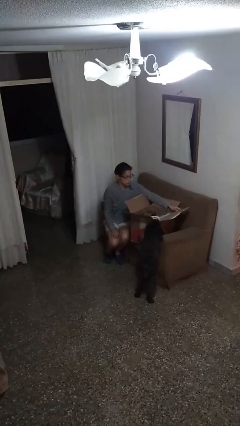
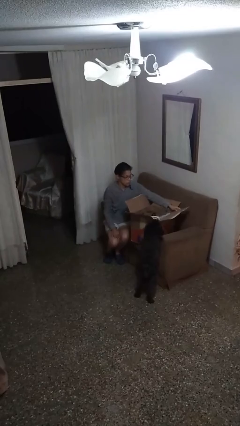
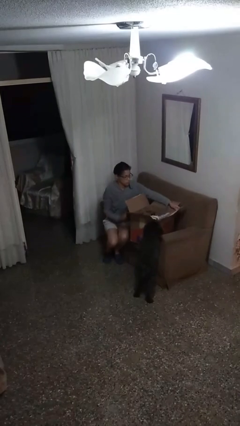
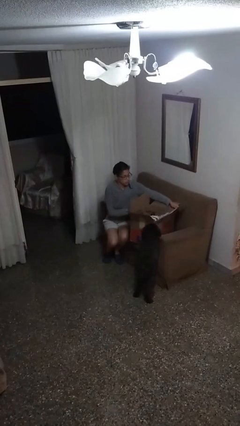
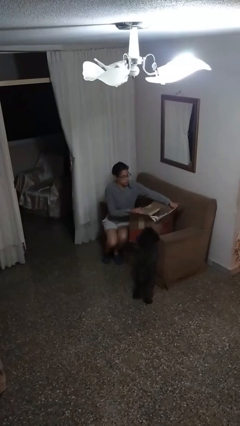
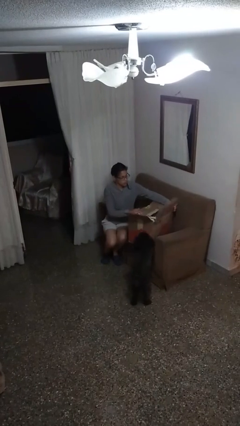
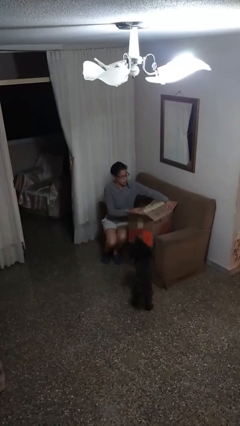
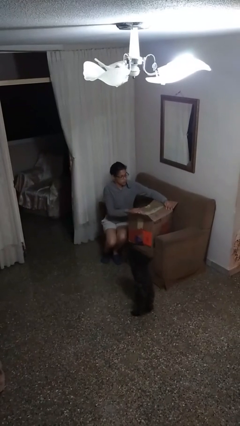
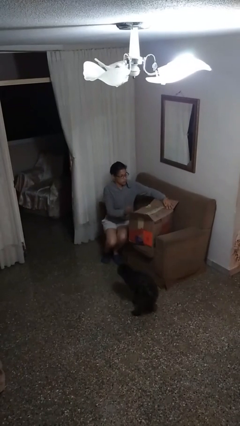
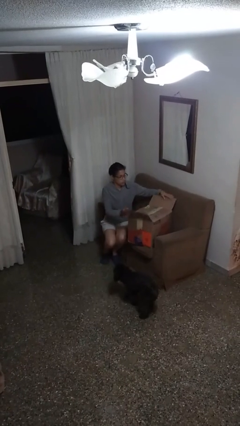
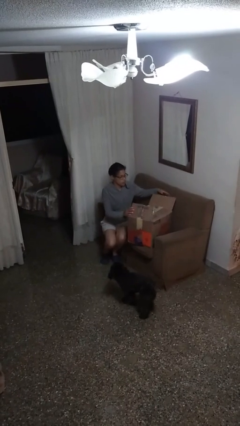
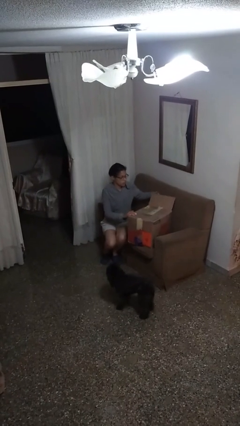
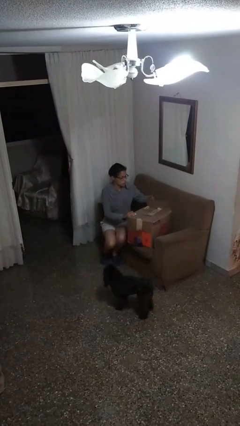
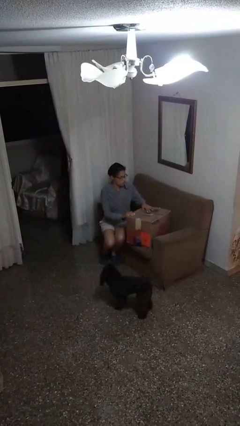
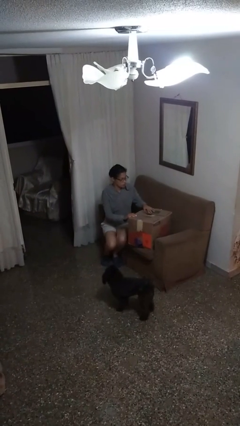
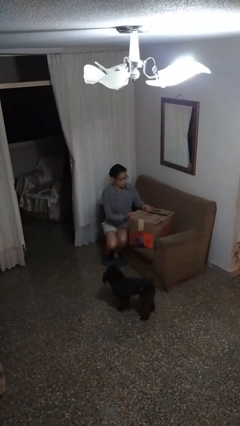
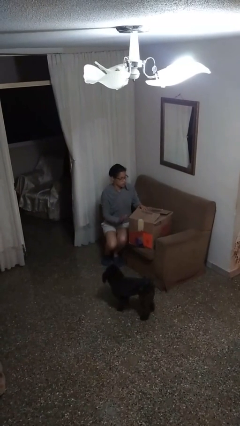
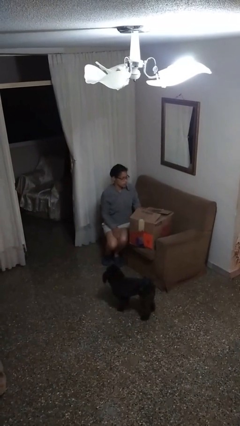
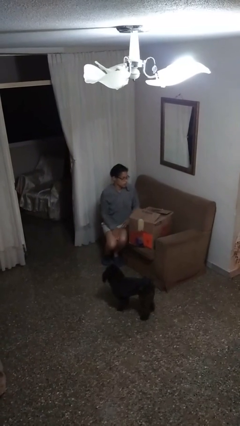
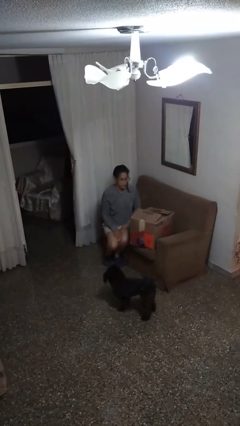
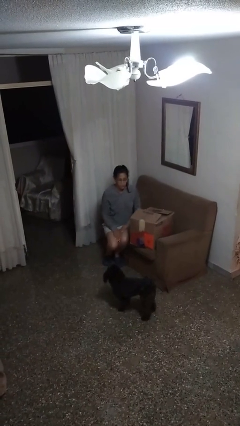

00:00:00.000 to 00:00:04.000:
person closes box

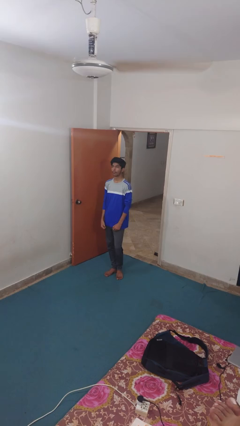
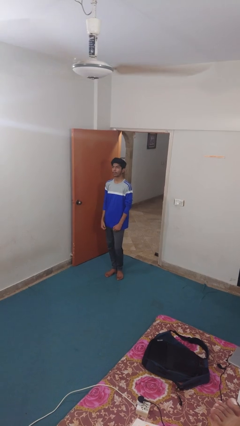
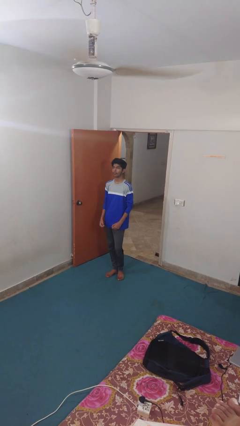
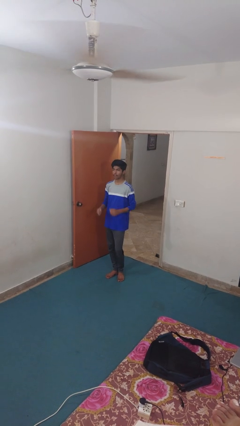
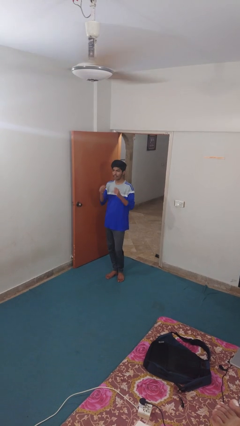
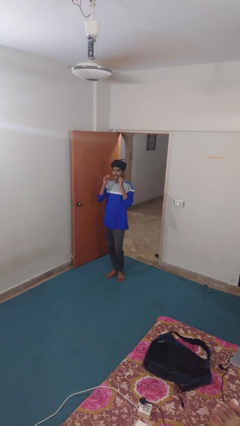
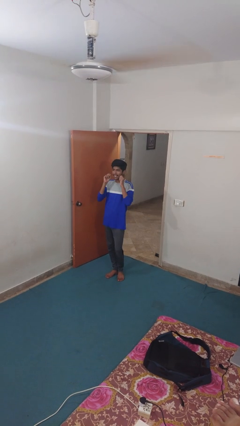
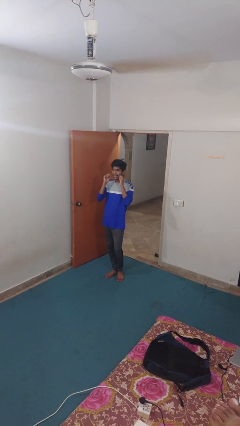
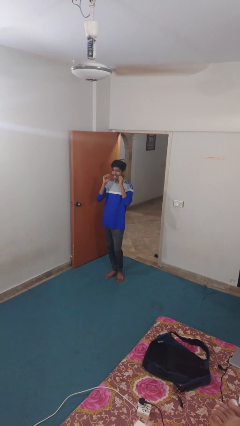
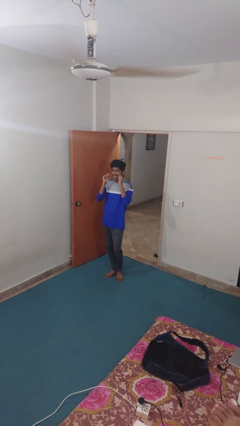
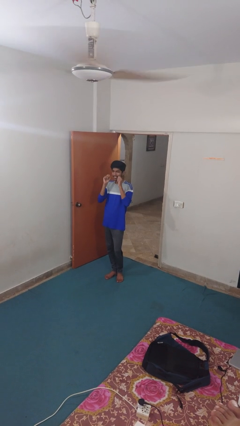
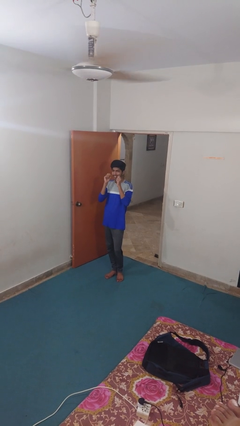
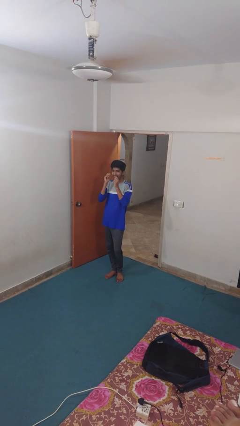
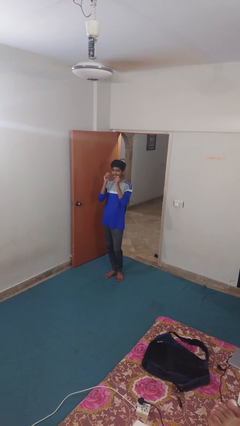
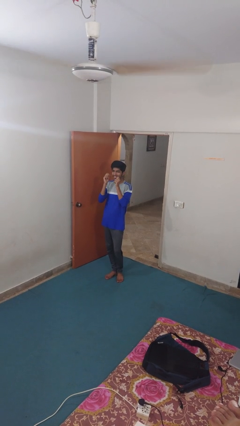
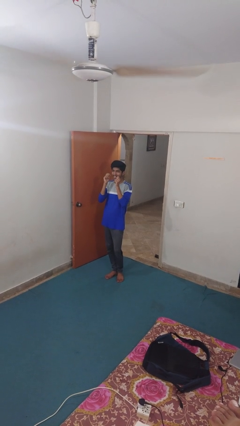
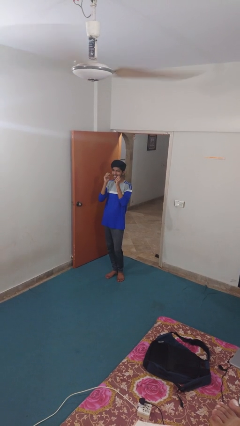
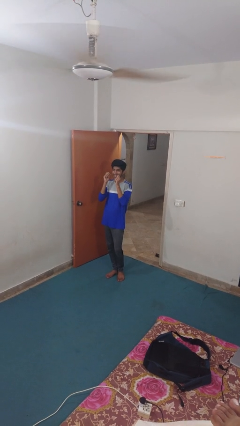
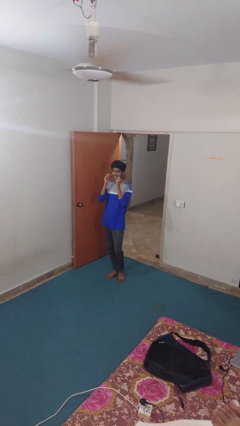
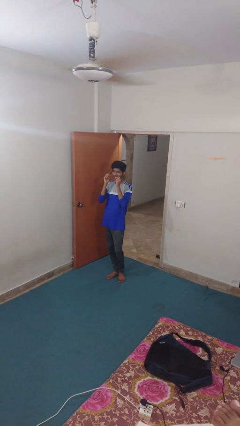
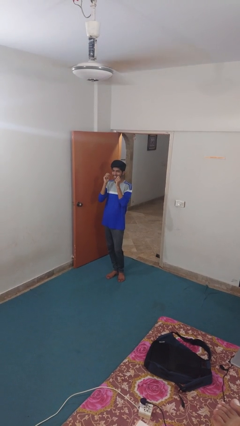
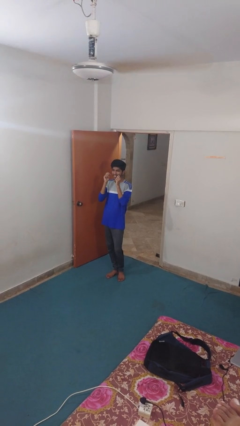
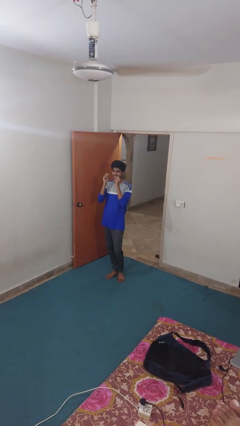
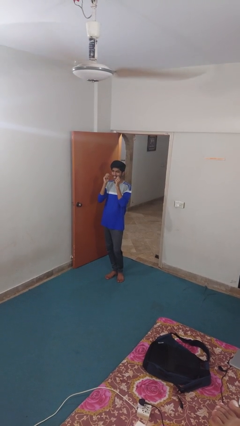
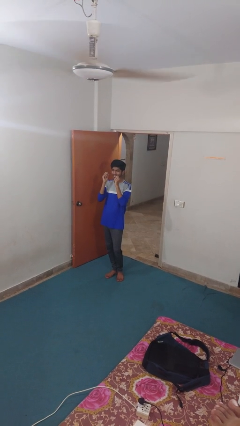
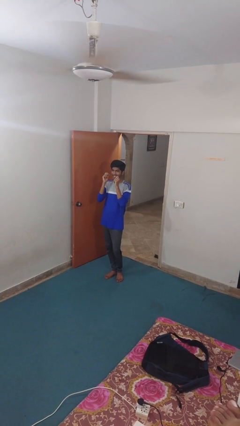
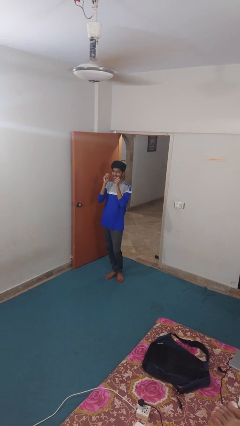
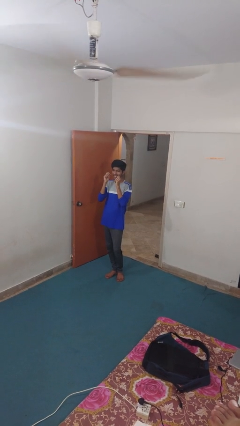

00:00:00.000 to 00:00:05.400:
person flosses

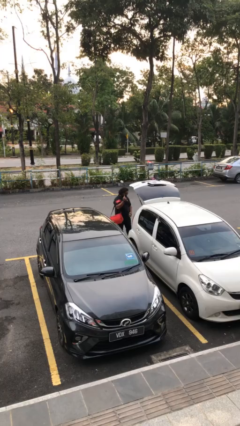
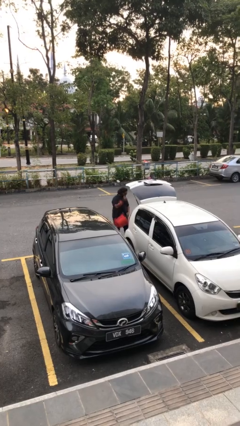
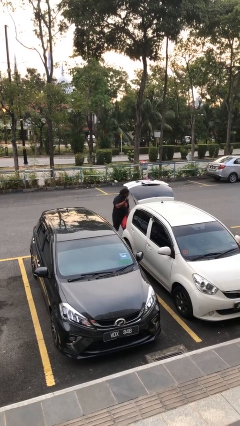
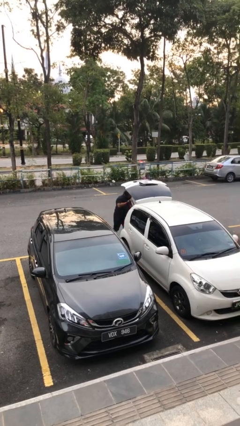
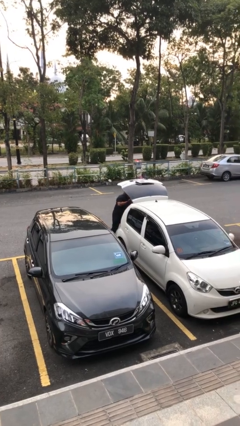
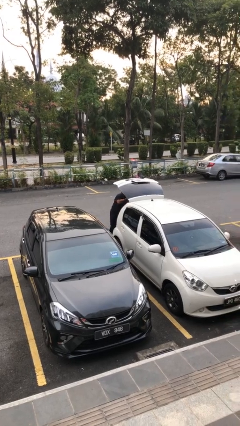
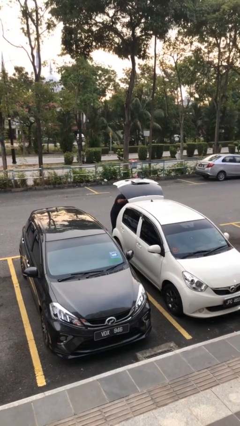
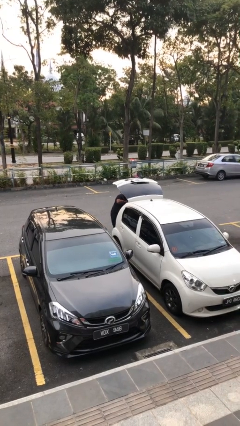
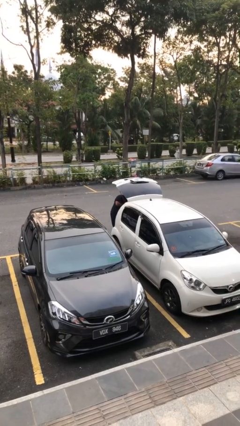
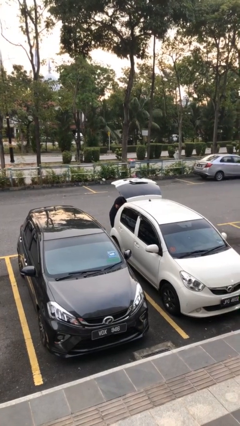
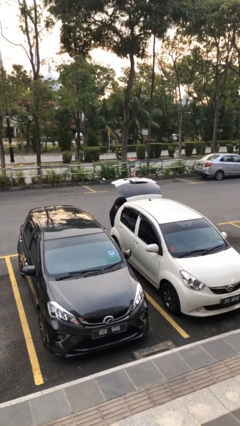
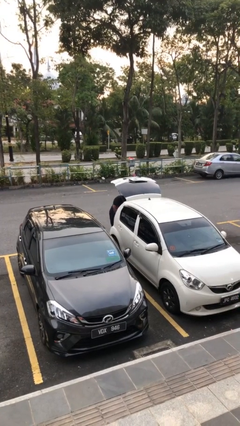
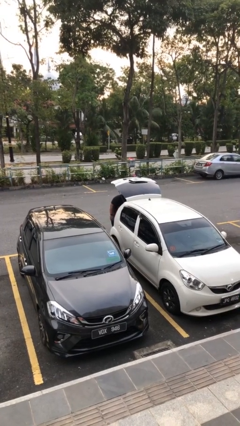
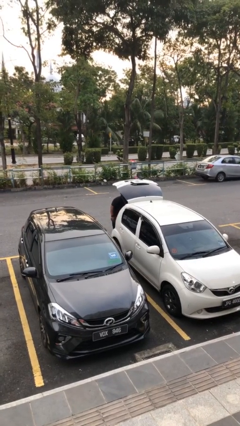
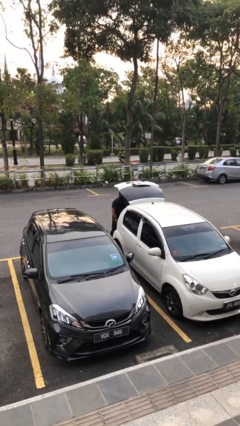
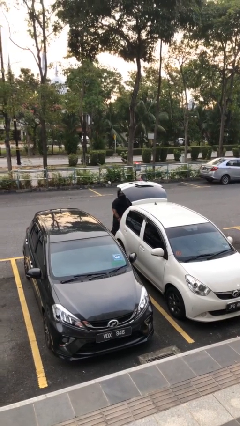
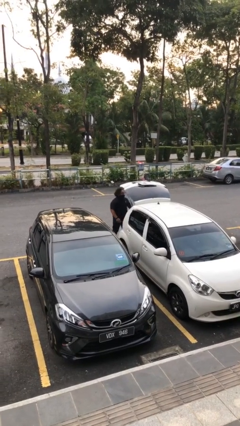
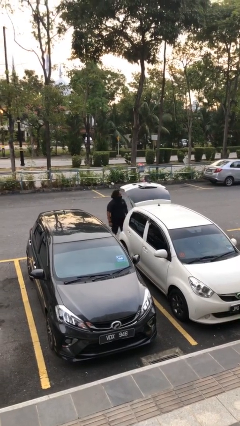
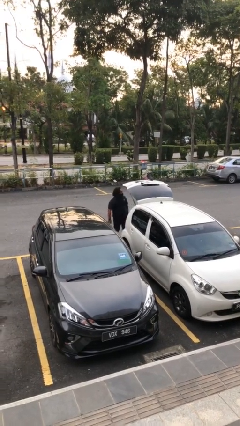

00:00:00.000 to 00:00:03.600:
person loads car

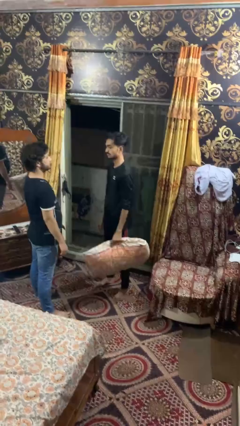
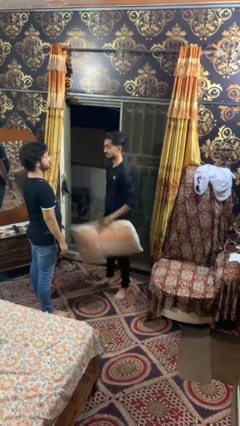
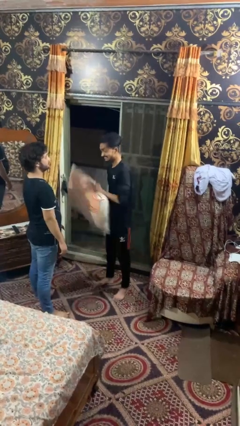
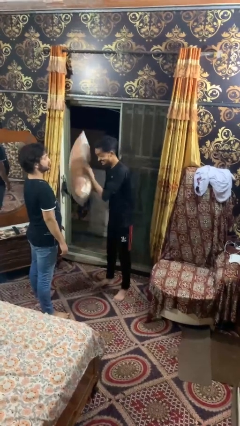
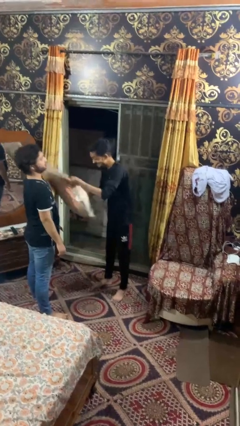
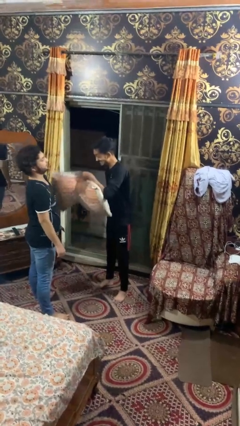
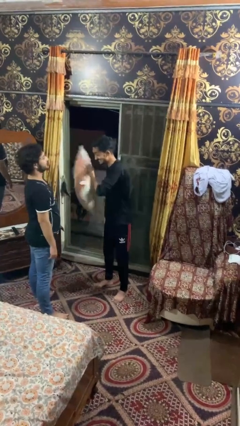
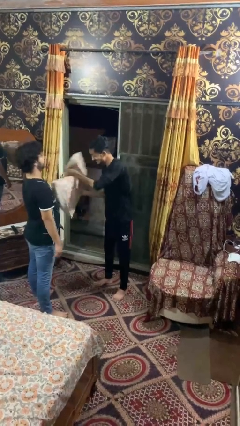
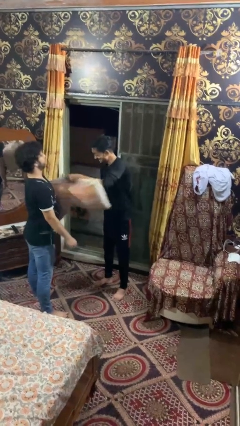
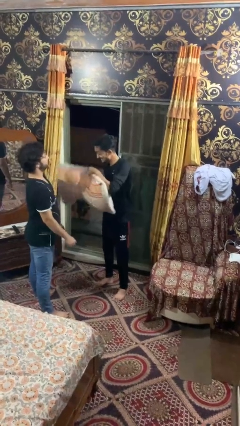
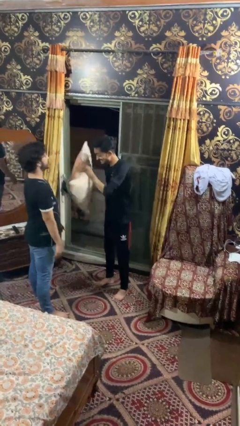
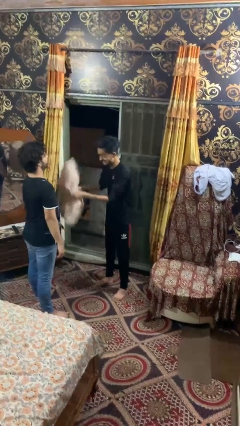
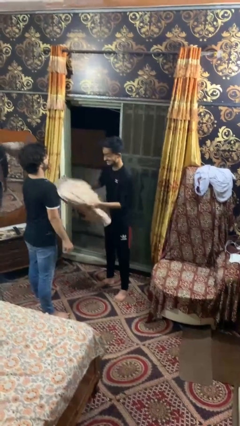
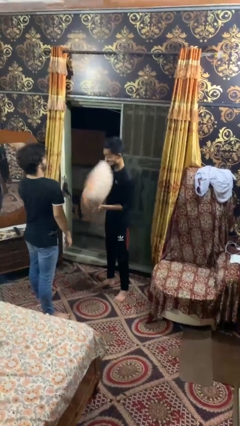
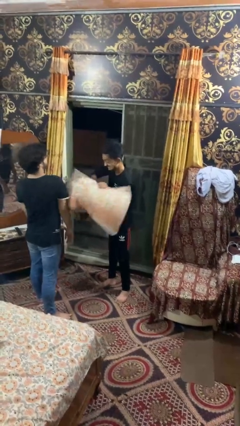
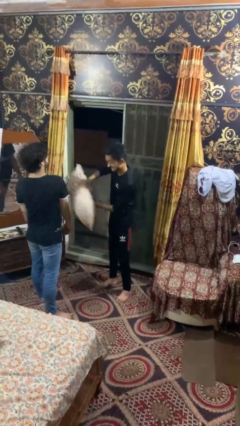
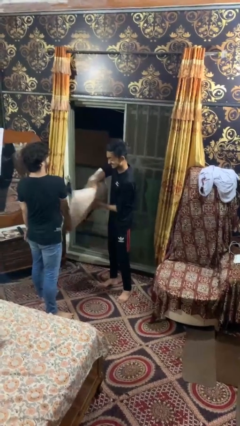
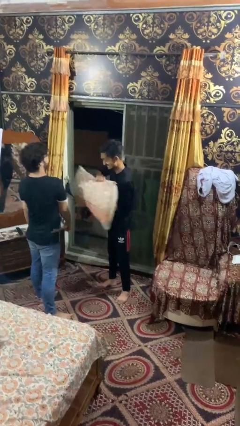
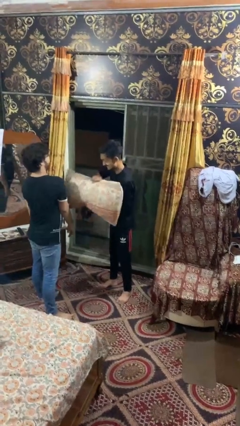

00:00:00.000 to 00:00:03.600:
person hits person with pillow

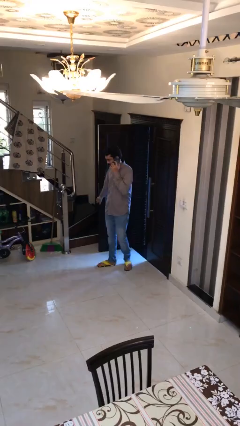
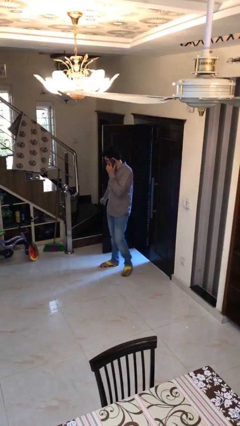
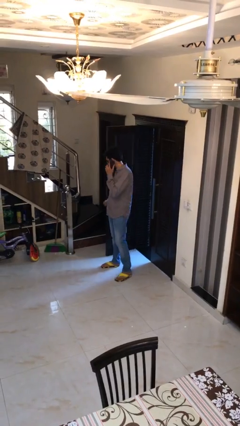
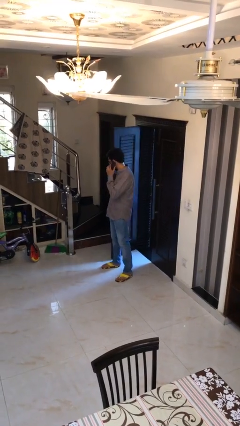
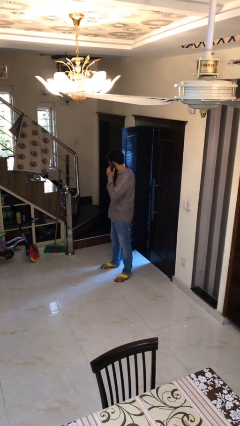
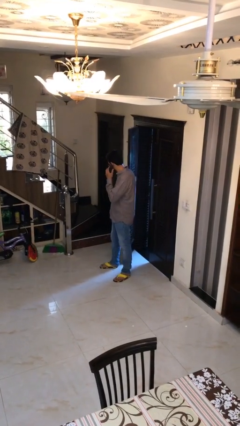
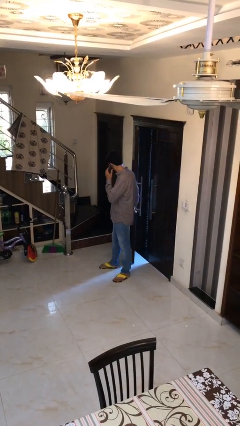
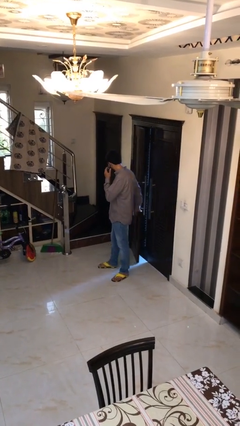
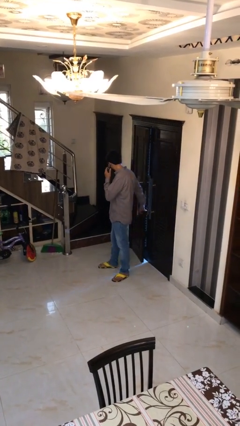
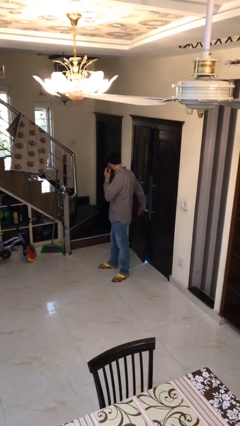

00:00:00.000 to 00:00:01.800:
person closes facility door
